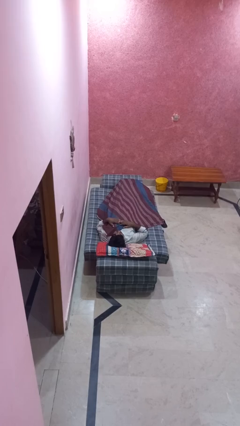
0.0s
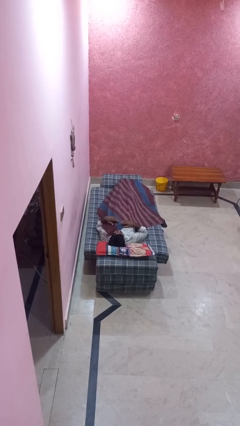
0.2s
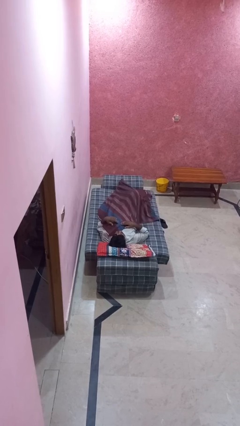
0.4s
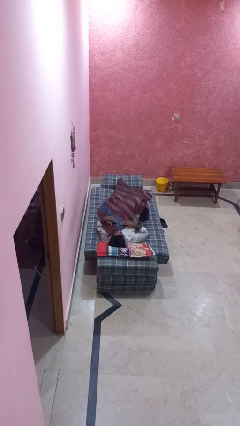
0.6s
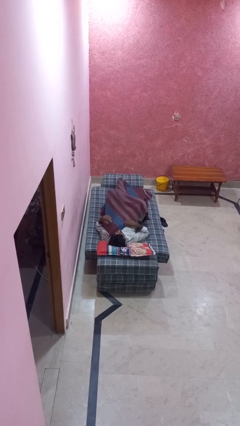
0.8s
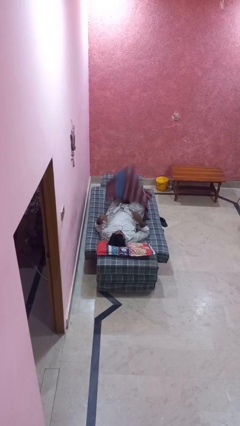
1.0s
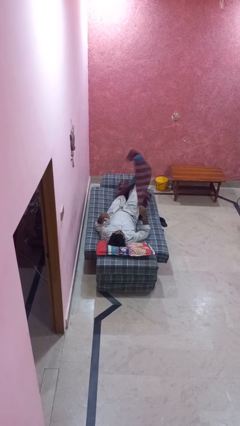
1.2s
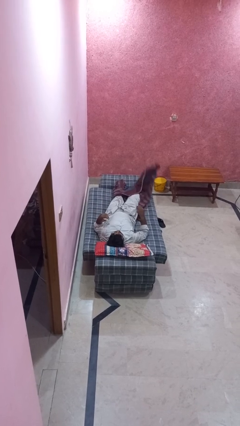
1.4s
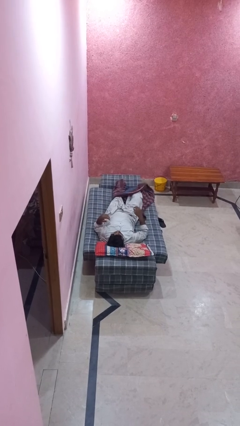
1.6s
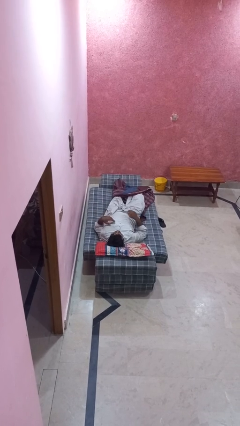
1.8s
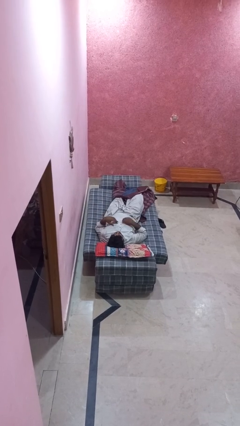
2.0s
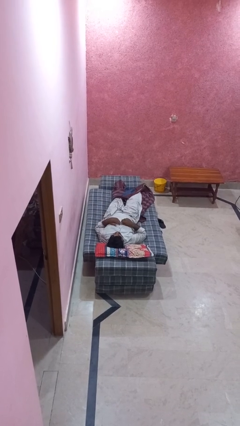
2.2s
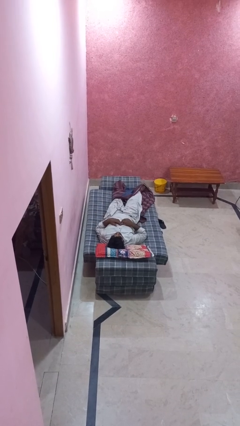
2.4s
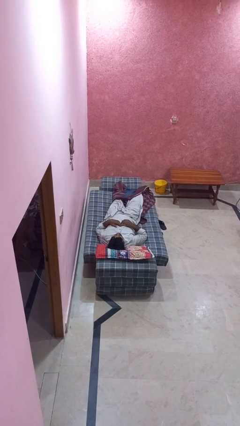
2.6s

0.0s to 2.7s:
person uncovers with bedsheets

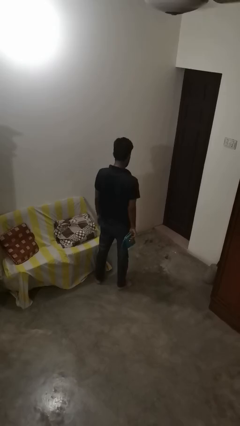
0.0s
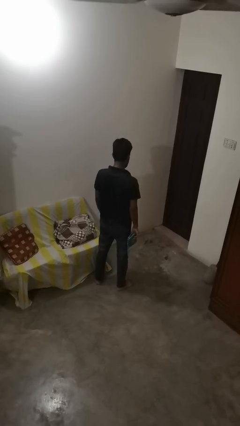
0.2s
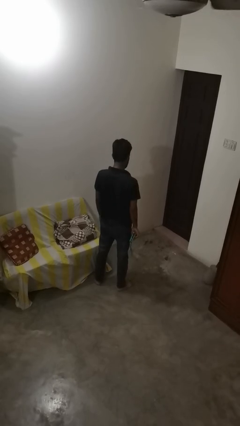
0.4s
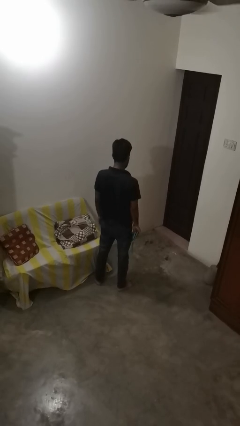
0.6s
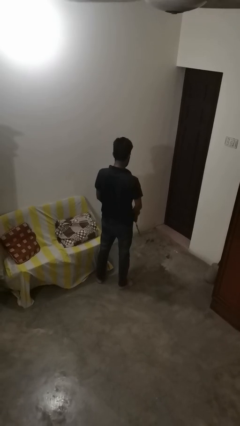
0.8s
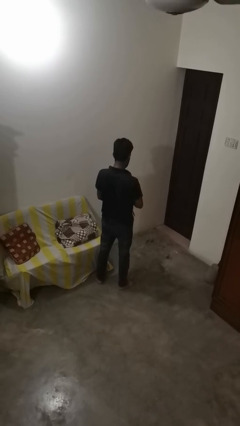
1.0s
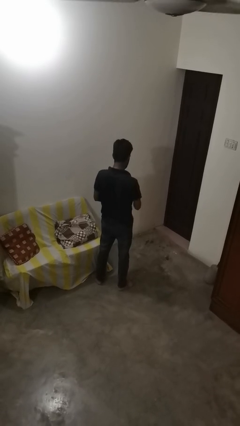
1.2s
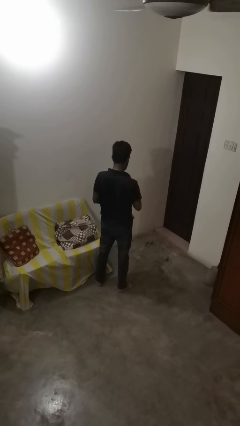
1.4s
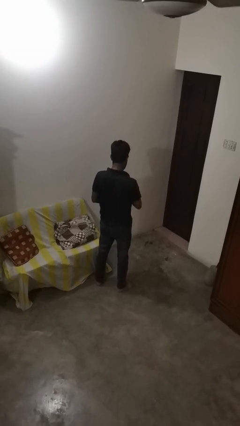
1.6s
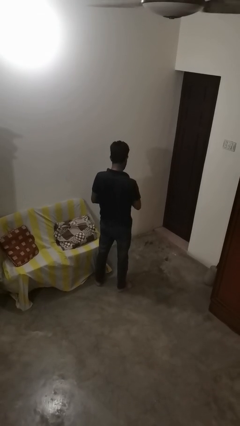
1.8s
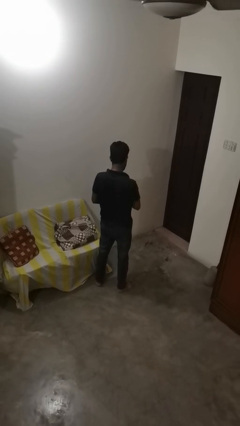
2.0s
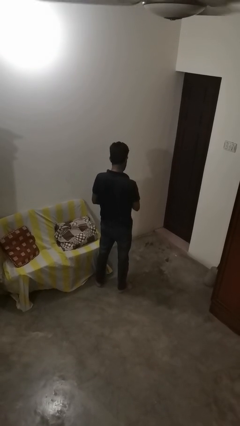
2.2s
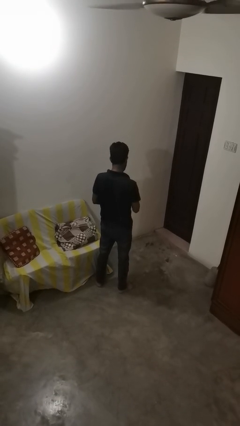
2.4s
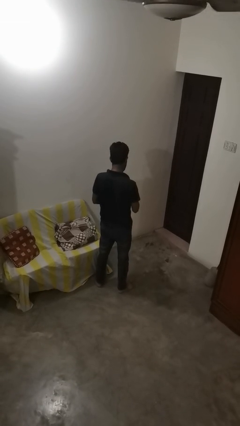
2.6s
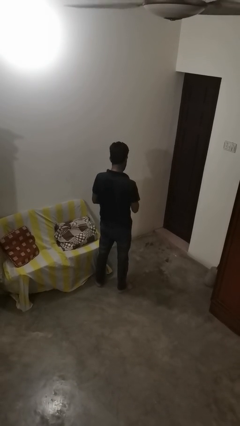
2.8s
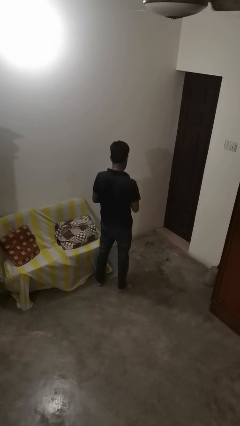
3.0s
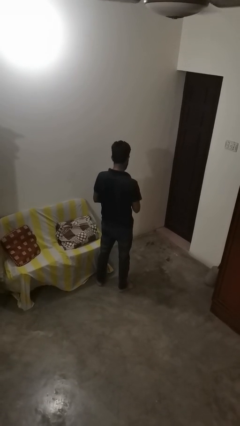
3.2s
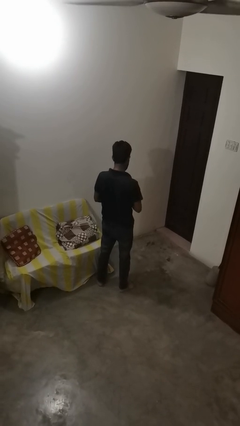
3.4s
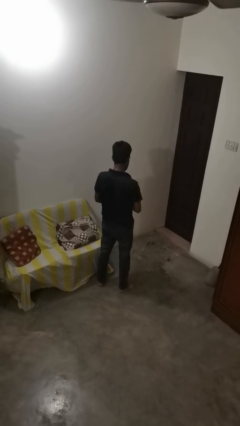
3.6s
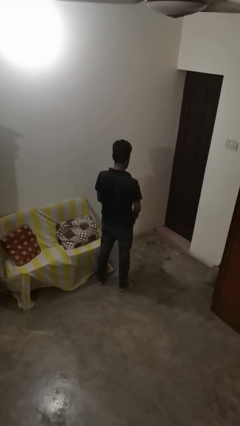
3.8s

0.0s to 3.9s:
person searches in bag

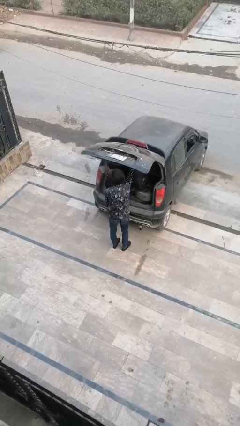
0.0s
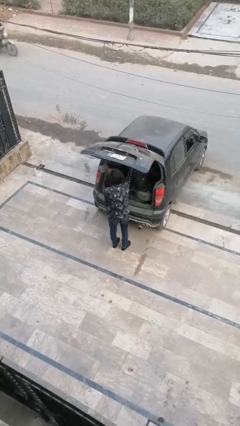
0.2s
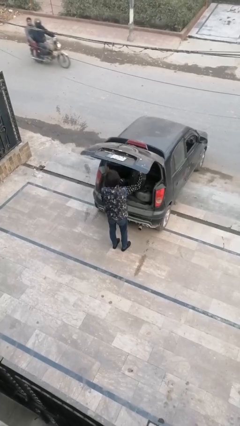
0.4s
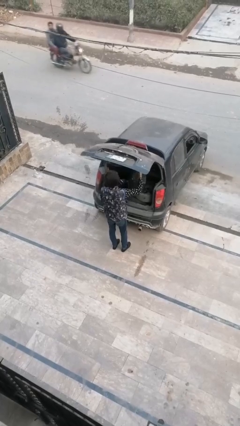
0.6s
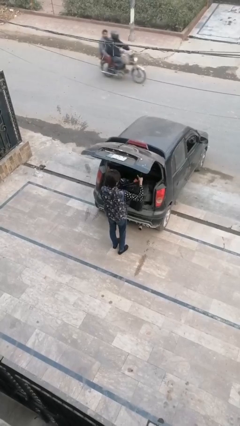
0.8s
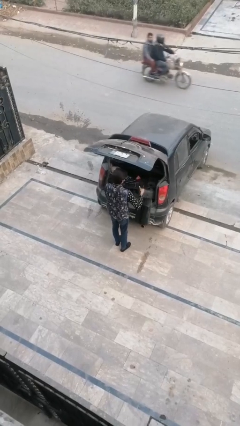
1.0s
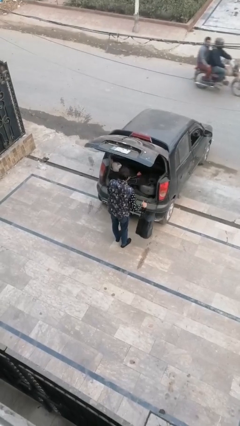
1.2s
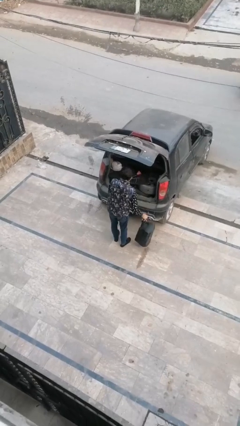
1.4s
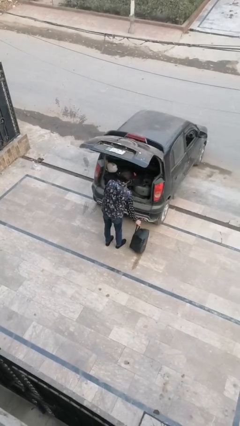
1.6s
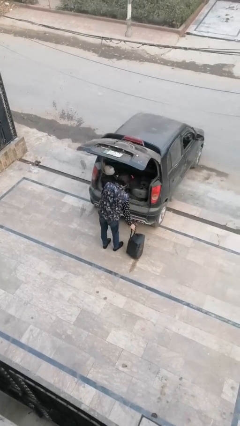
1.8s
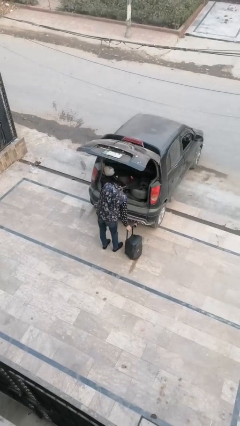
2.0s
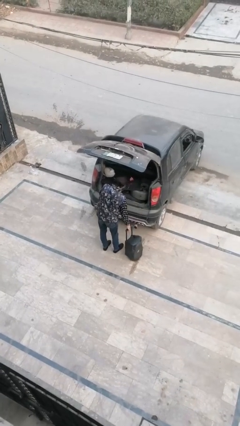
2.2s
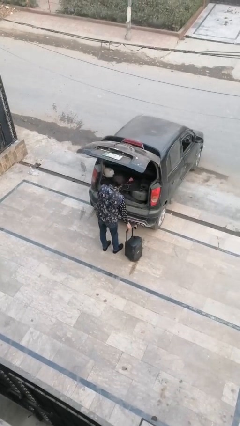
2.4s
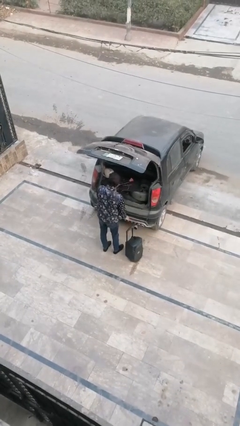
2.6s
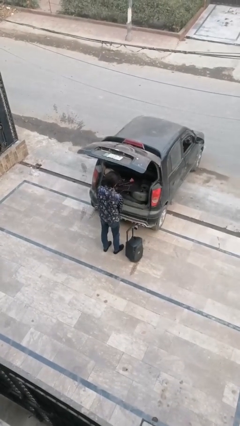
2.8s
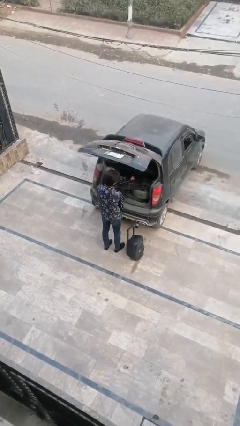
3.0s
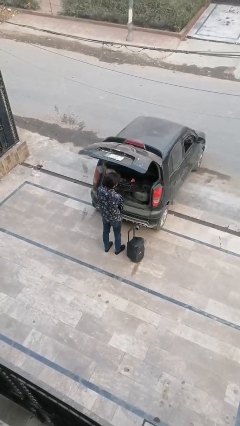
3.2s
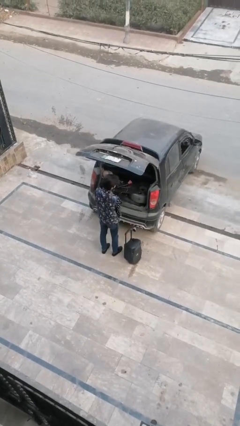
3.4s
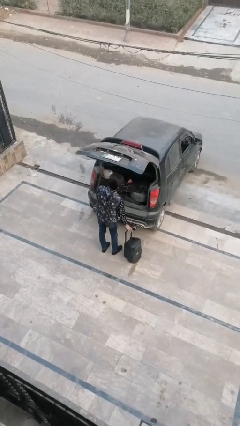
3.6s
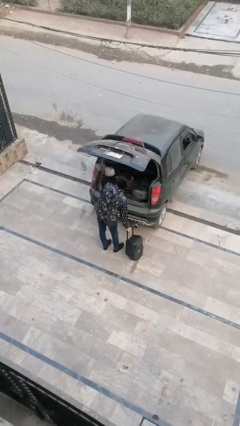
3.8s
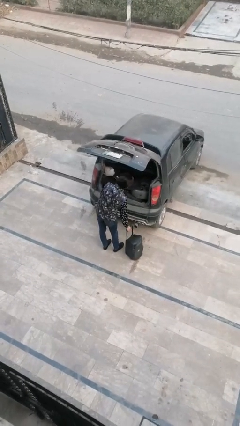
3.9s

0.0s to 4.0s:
person unloads car

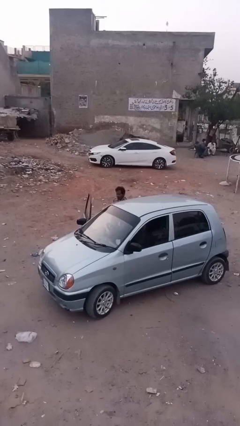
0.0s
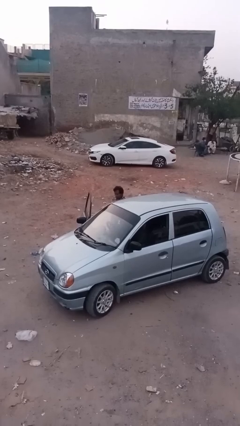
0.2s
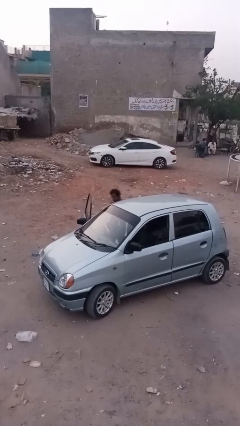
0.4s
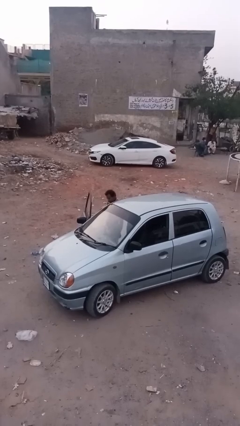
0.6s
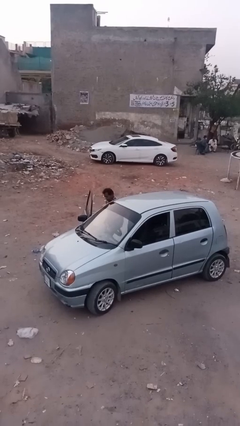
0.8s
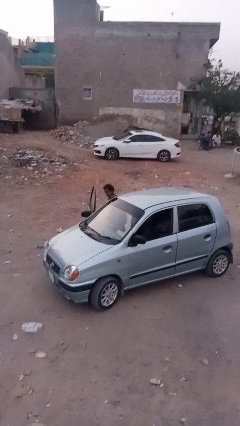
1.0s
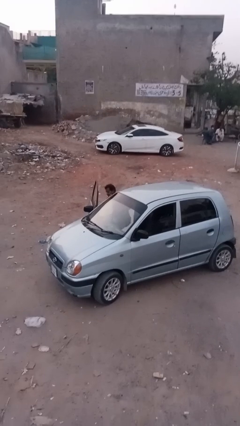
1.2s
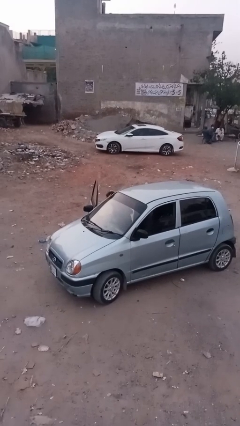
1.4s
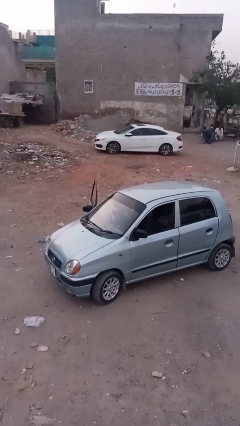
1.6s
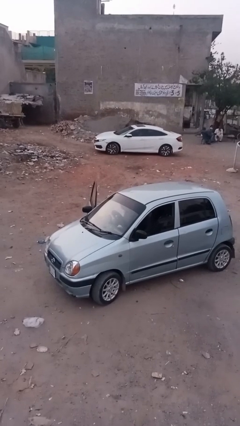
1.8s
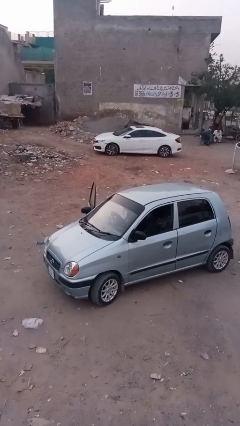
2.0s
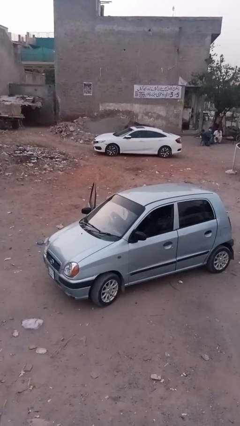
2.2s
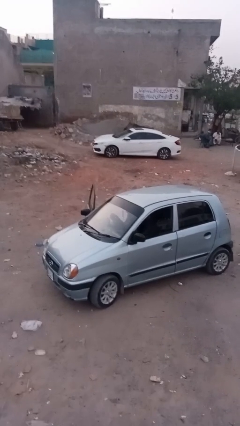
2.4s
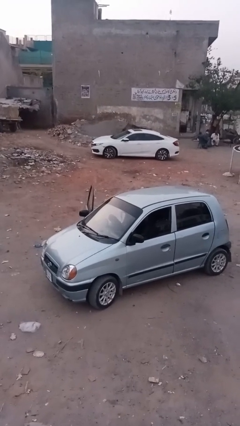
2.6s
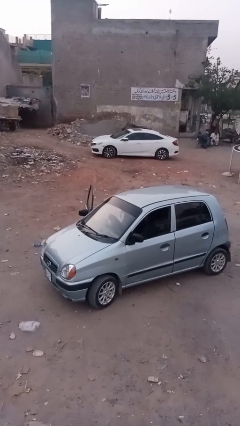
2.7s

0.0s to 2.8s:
person enters car

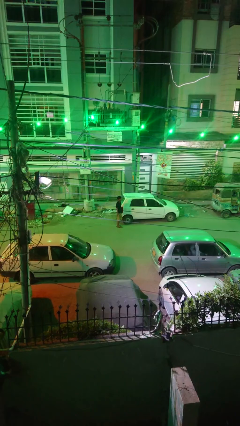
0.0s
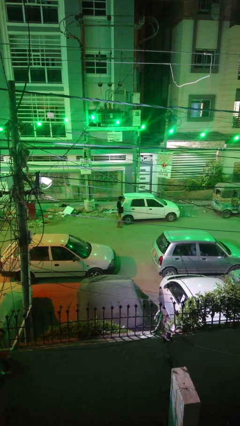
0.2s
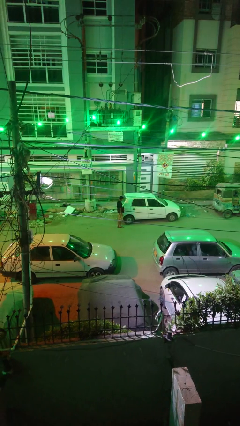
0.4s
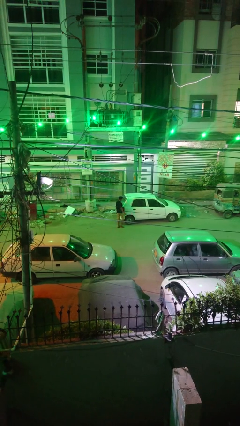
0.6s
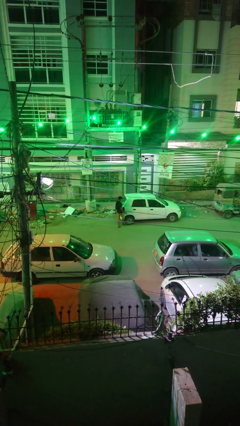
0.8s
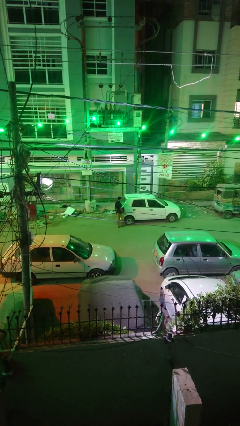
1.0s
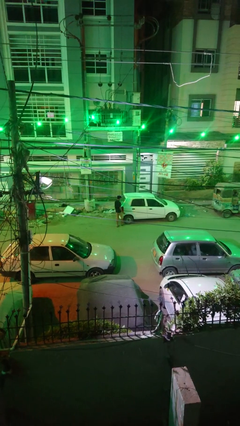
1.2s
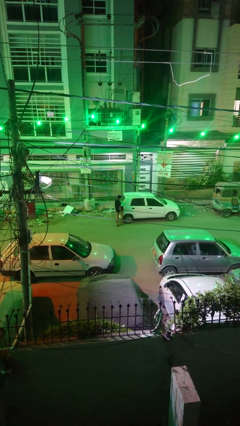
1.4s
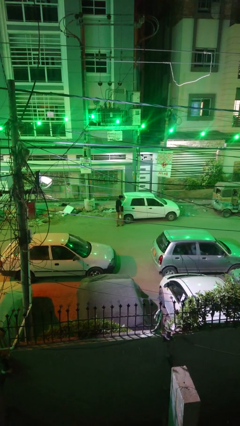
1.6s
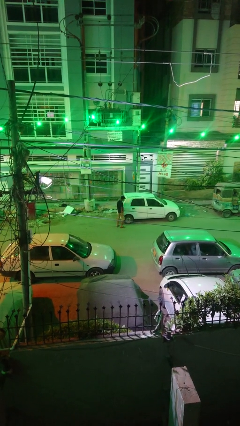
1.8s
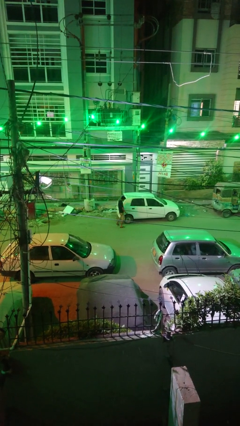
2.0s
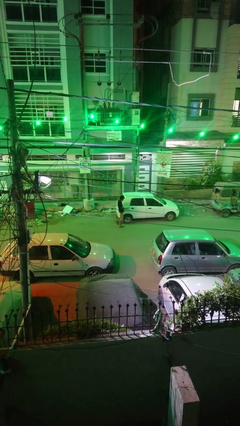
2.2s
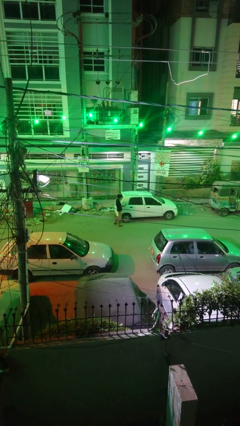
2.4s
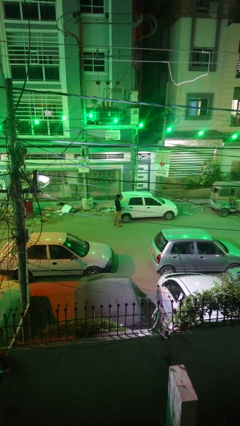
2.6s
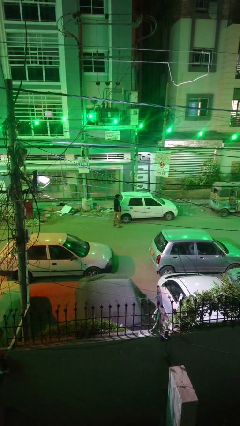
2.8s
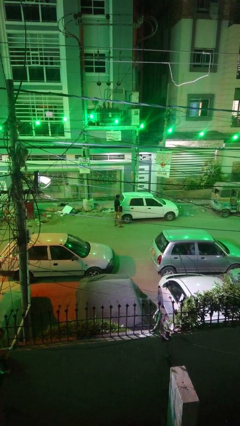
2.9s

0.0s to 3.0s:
person kicks car tires

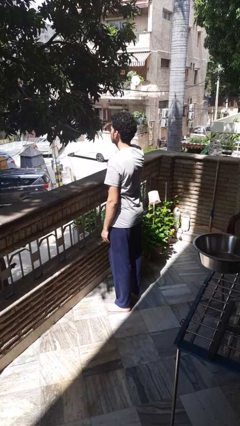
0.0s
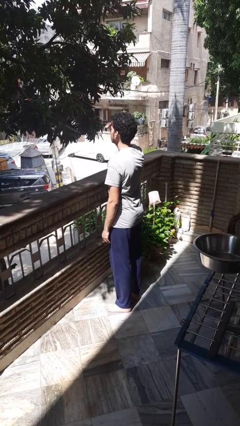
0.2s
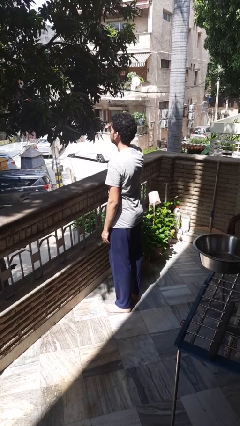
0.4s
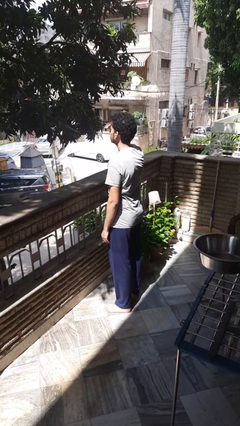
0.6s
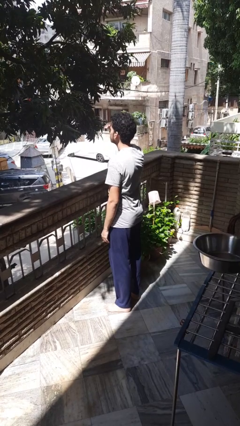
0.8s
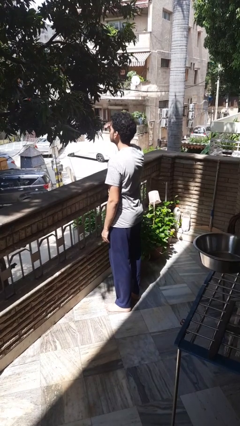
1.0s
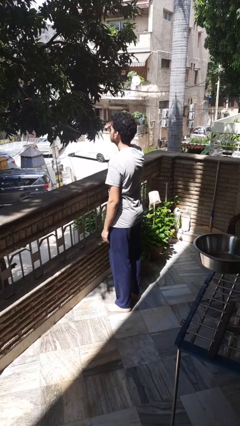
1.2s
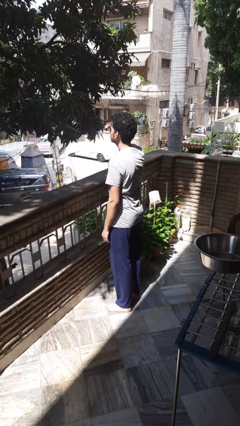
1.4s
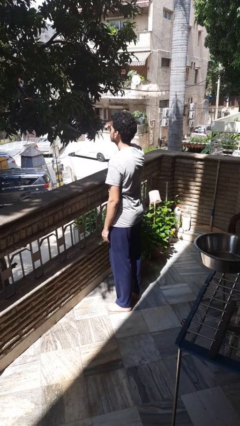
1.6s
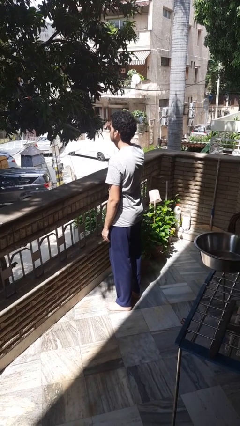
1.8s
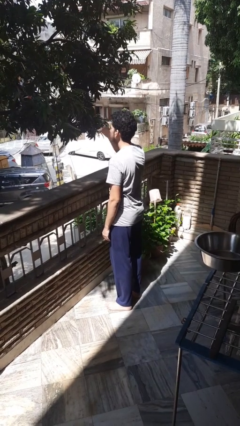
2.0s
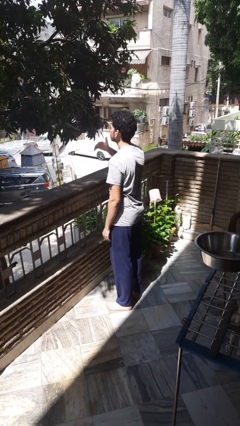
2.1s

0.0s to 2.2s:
person shades eyes
